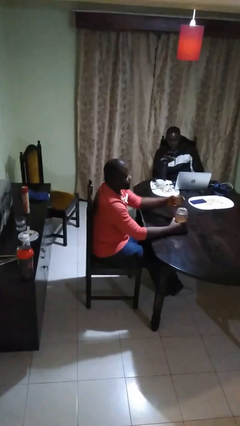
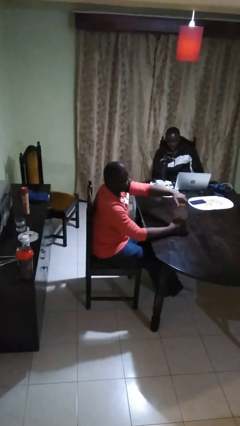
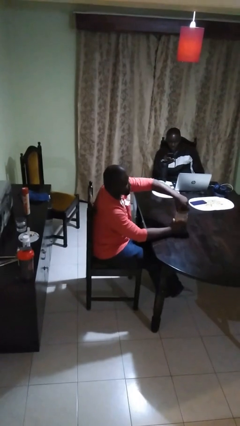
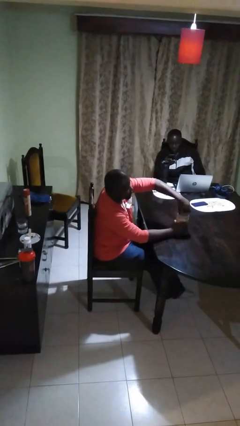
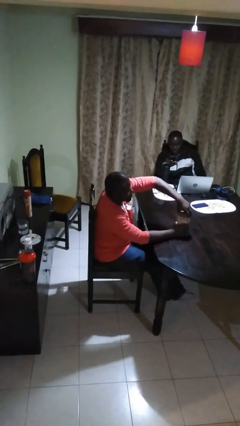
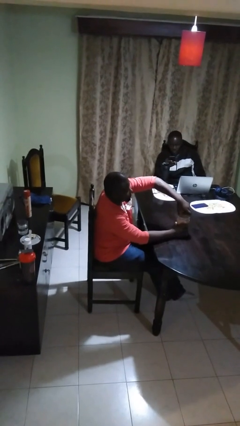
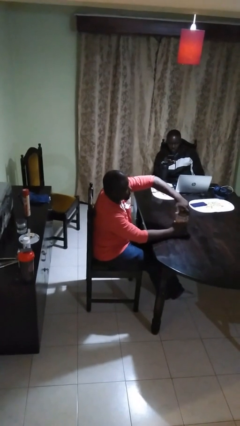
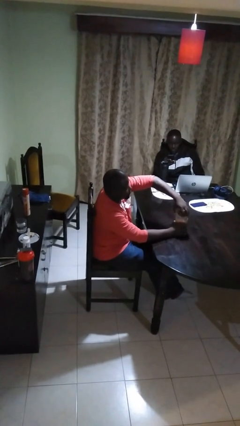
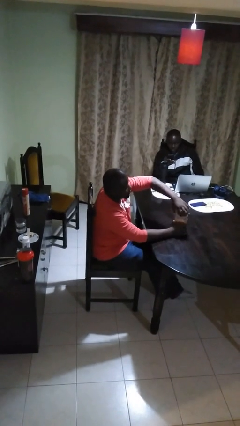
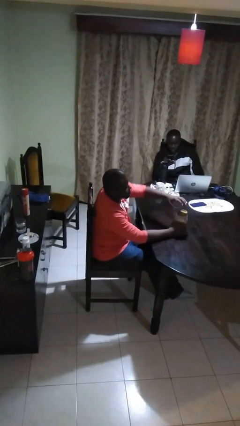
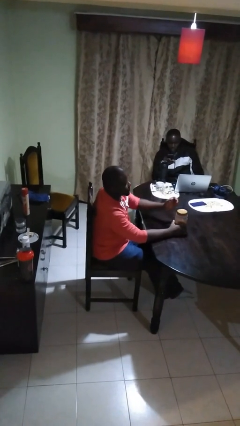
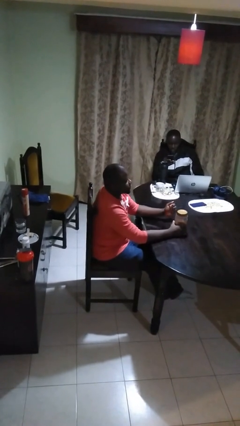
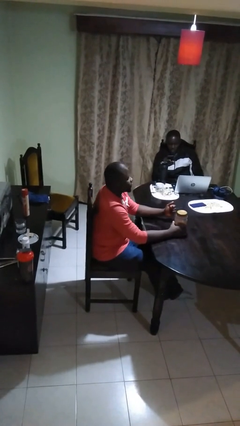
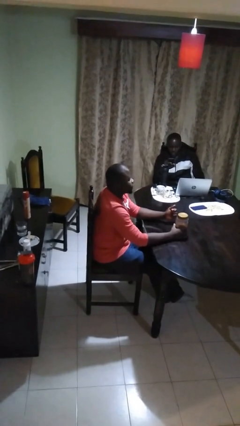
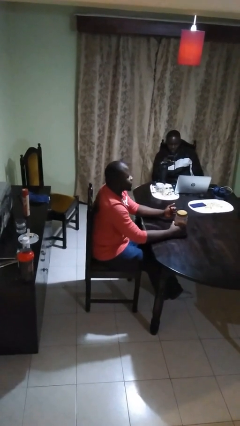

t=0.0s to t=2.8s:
person closes jar

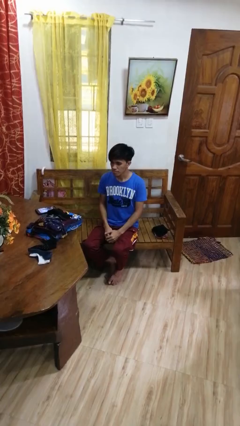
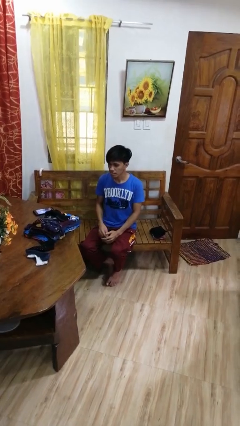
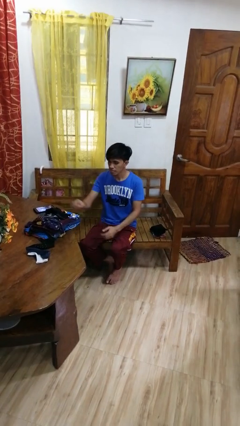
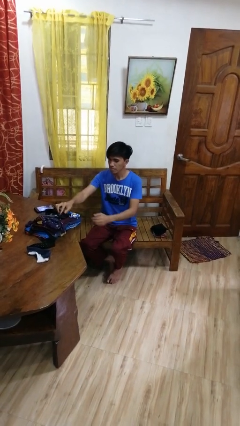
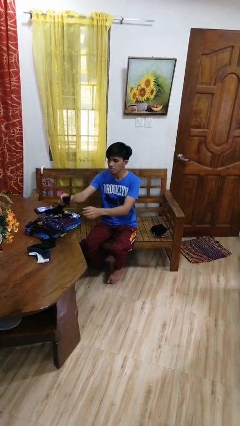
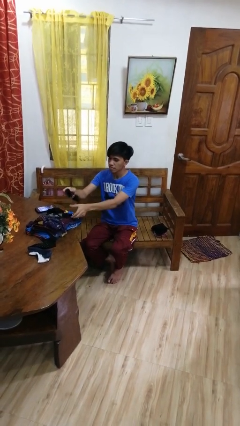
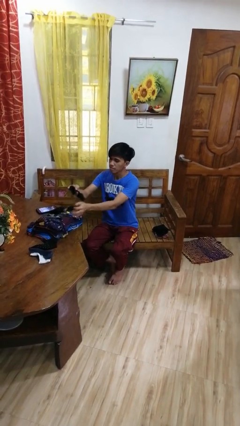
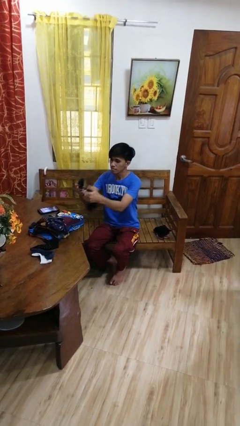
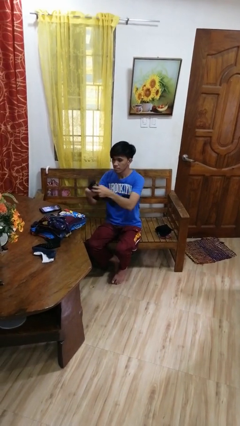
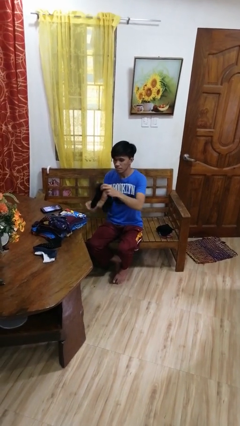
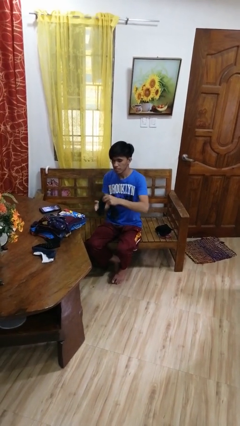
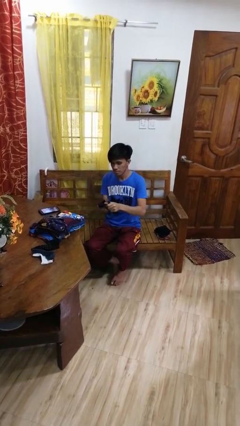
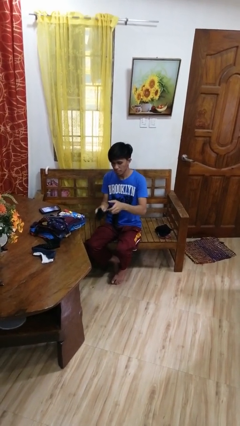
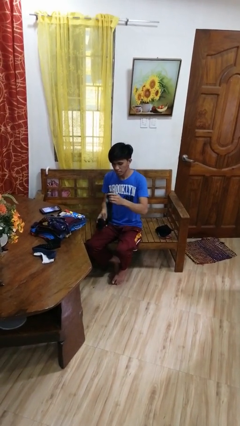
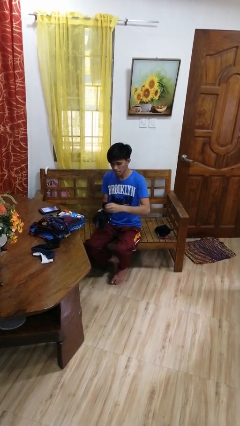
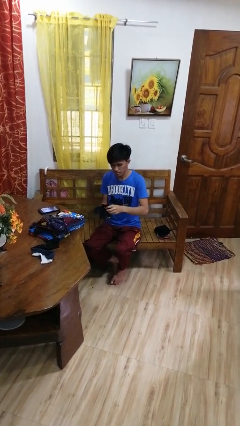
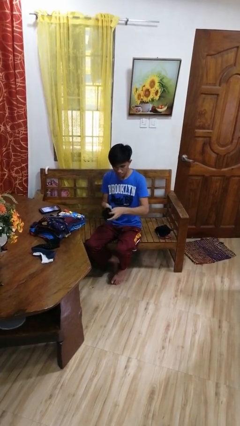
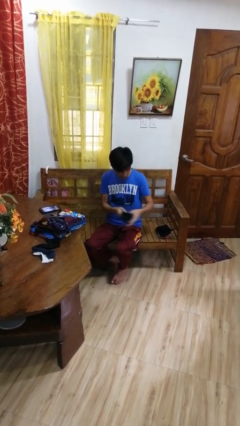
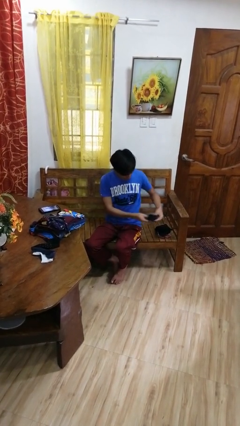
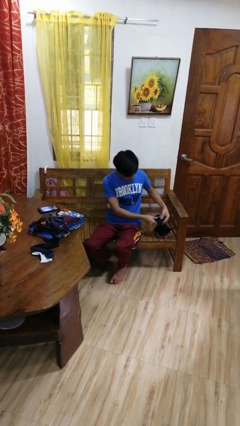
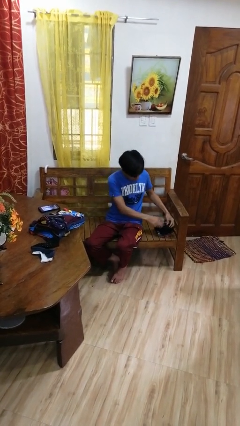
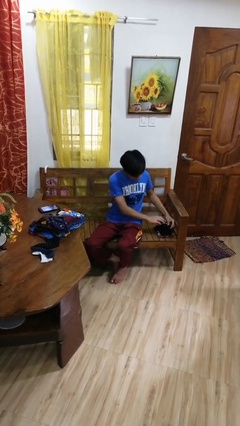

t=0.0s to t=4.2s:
person folds socks

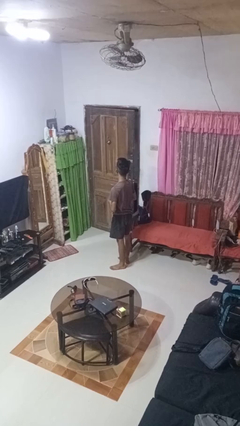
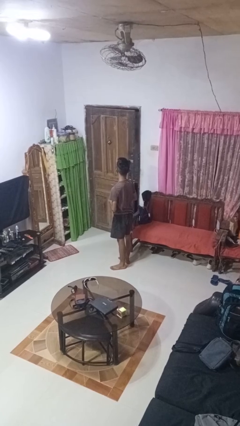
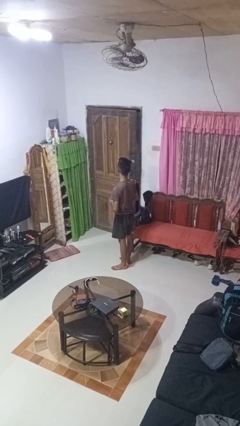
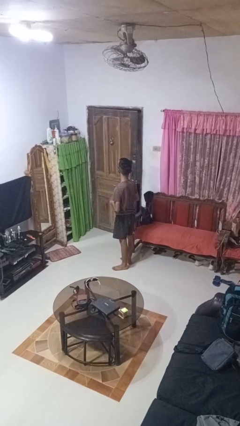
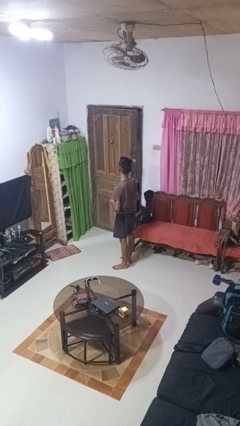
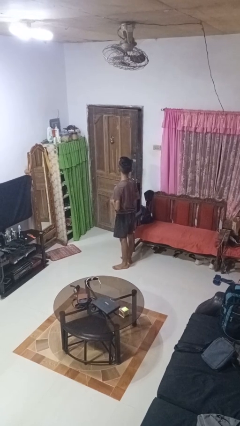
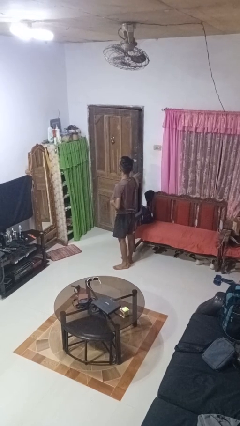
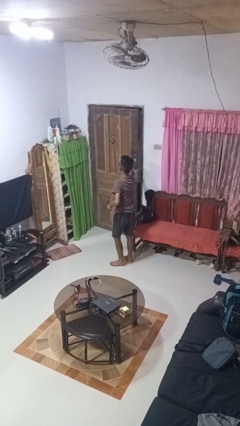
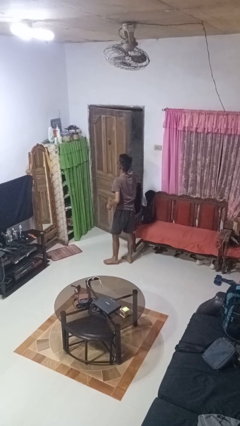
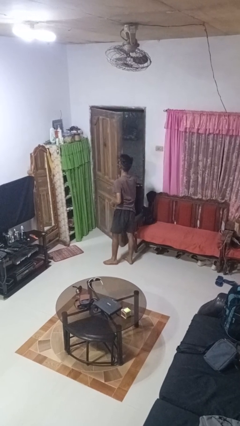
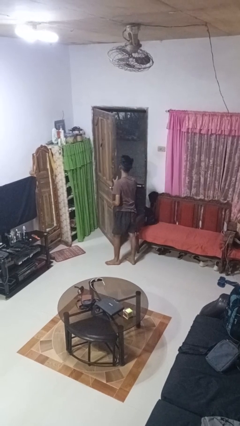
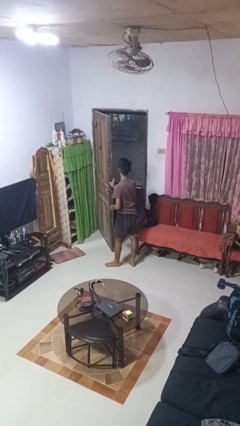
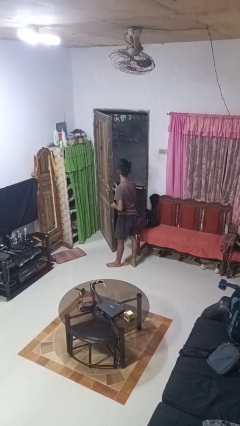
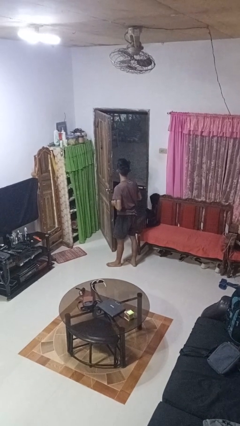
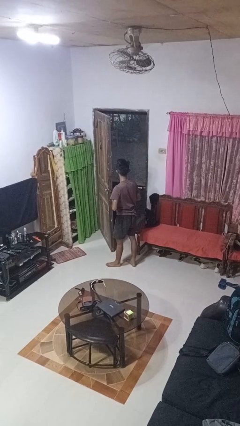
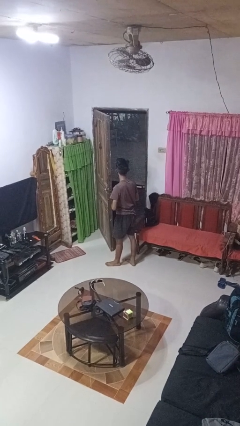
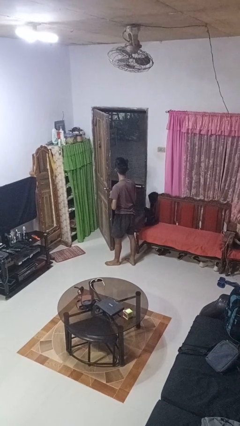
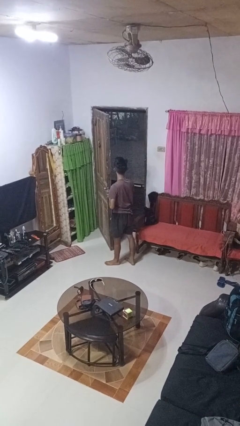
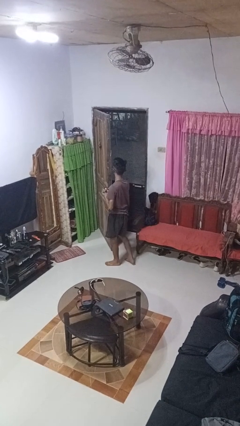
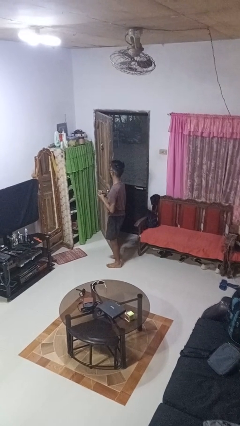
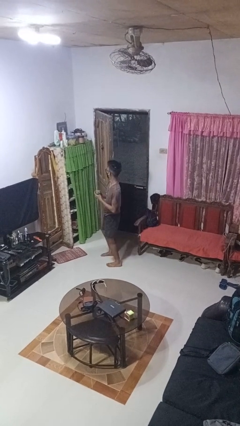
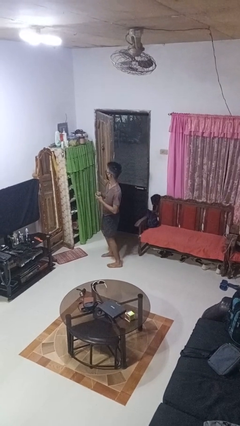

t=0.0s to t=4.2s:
person opens facility door

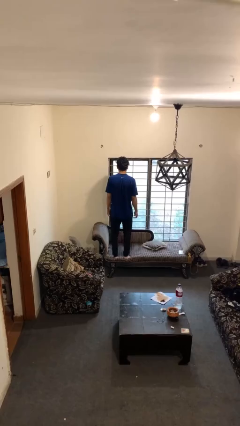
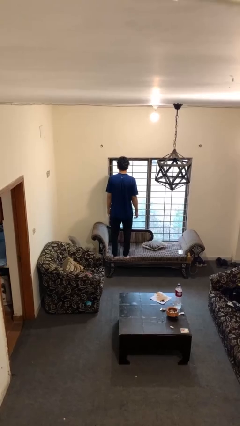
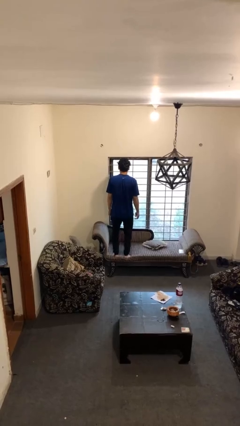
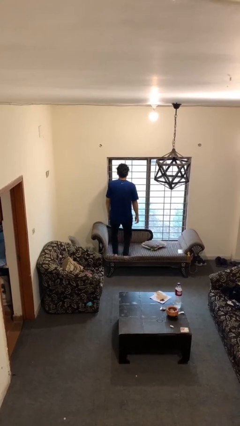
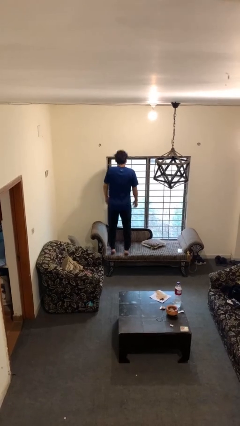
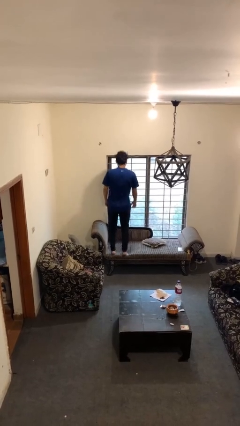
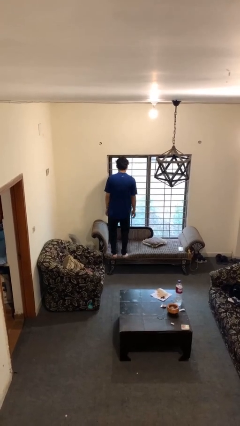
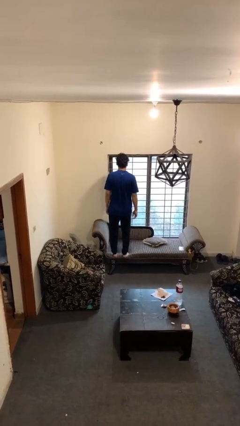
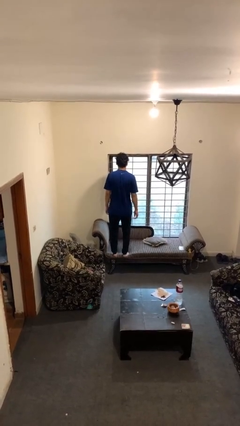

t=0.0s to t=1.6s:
person jumps on couch

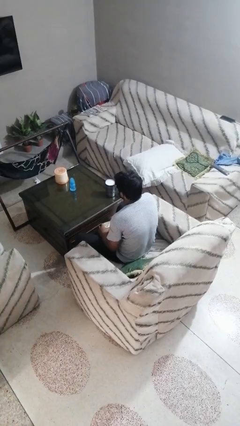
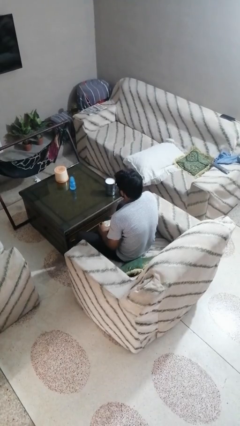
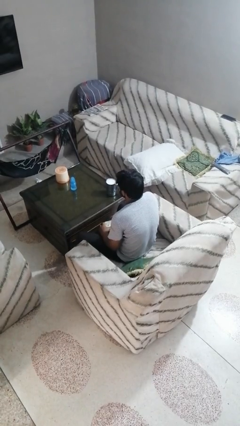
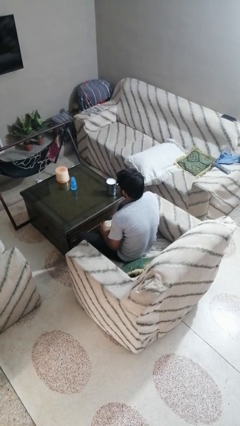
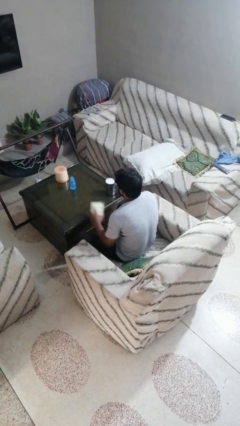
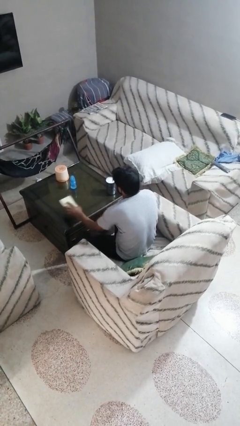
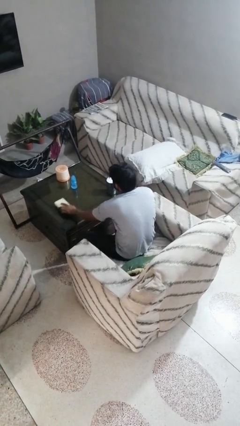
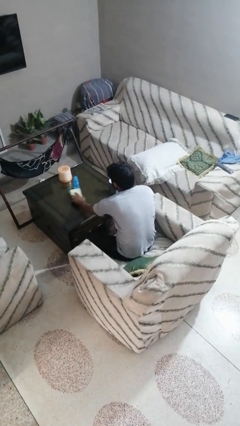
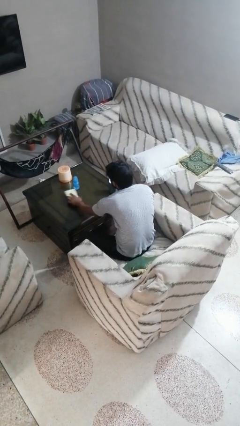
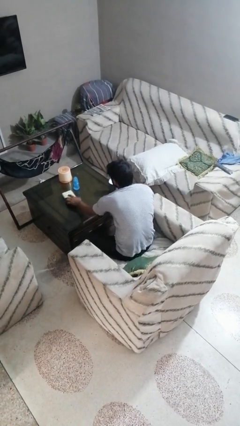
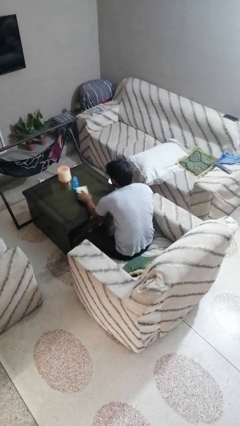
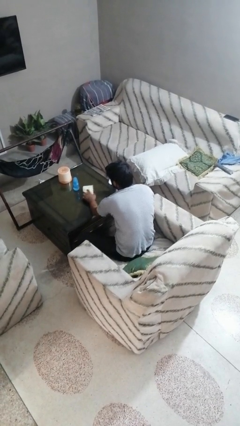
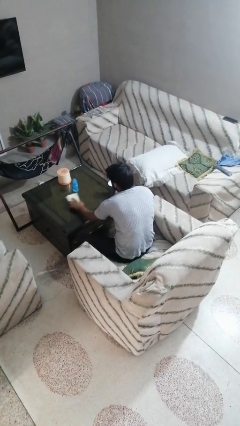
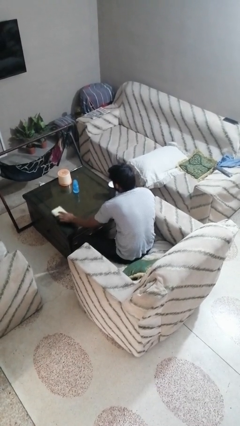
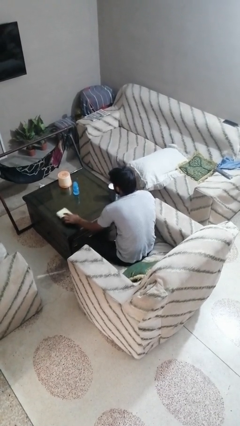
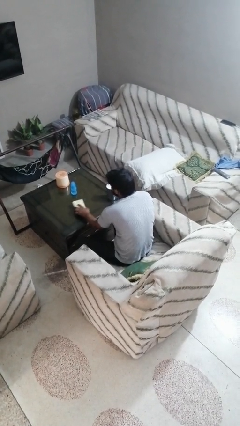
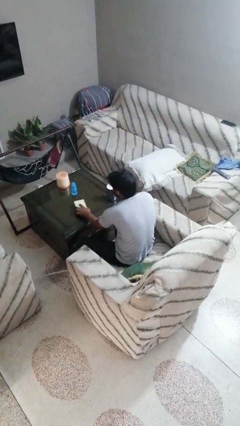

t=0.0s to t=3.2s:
person dusts furniture

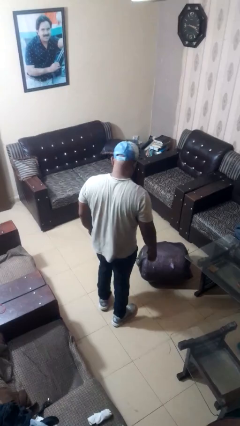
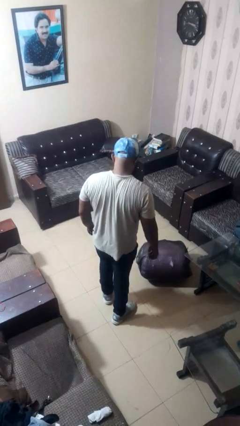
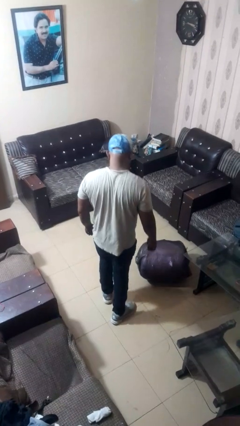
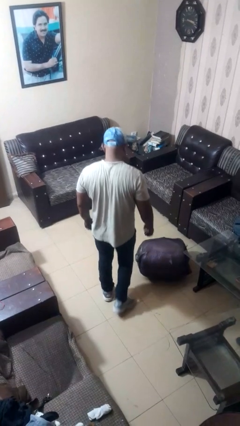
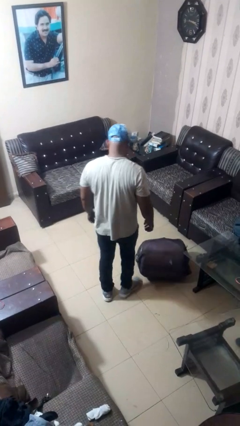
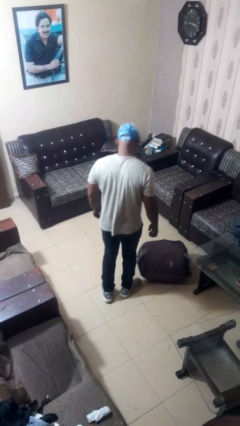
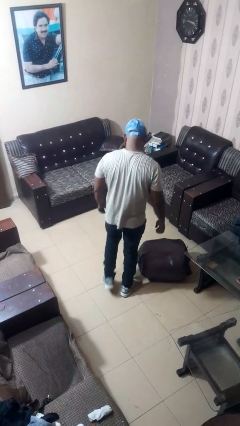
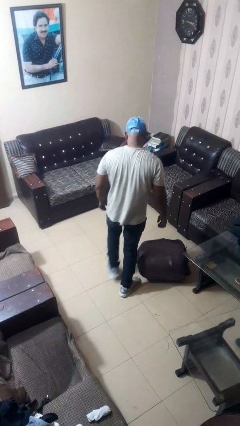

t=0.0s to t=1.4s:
person trips on object on floor
